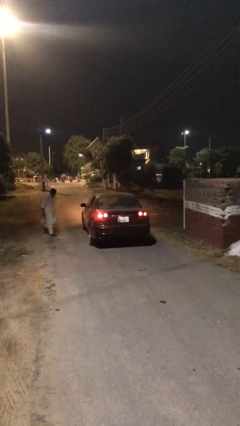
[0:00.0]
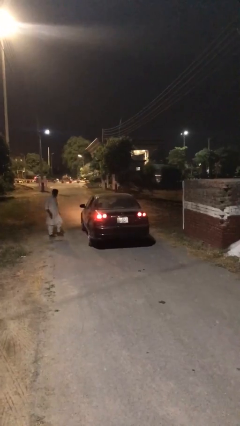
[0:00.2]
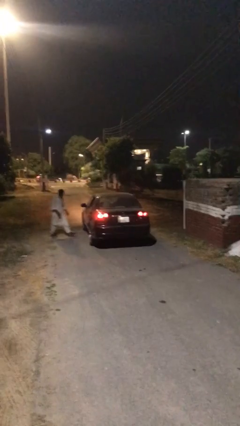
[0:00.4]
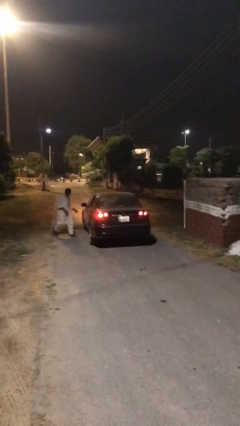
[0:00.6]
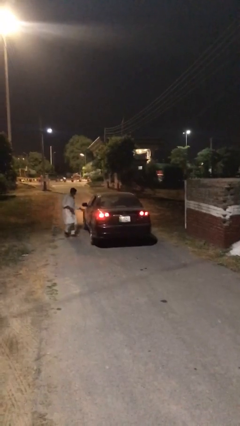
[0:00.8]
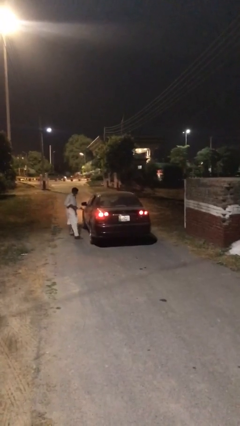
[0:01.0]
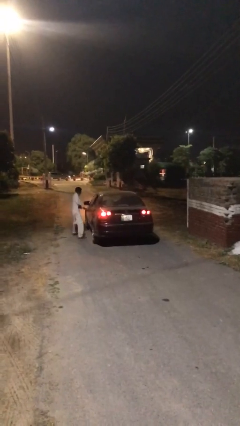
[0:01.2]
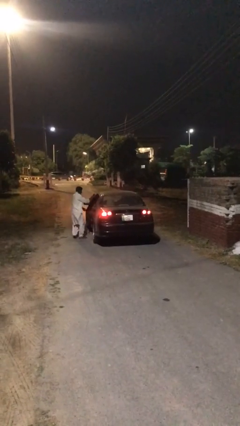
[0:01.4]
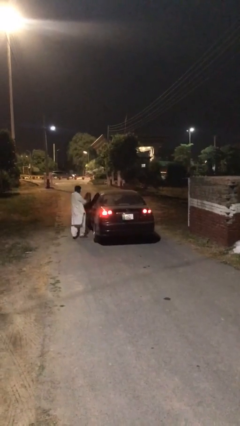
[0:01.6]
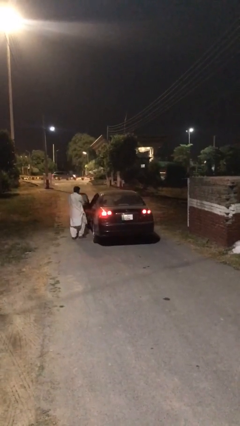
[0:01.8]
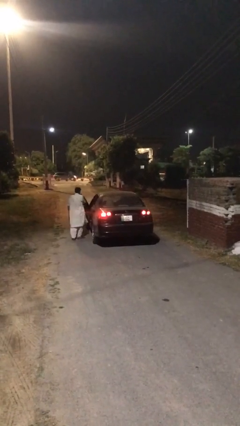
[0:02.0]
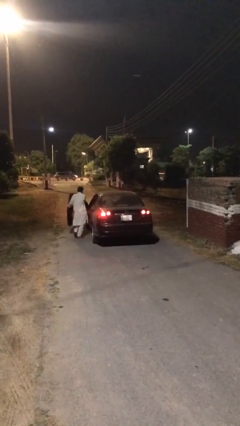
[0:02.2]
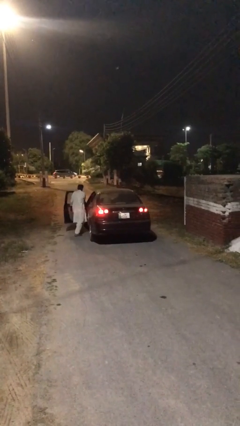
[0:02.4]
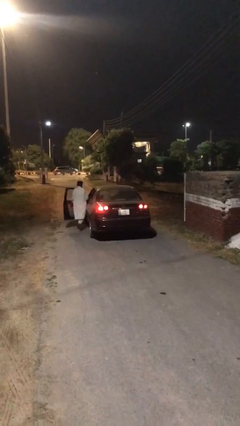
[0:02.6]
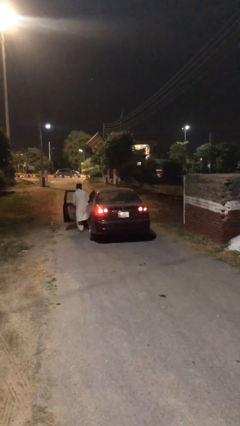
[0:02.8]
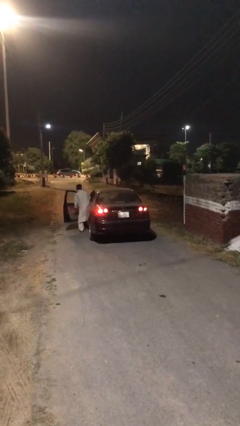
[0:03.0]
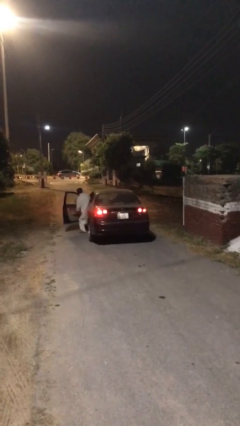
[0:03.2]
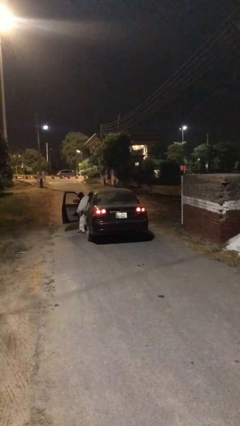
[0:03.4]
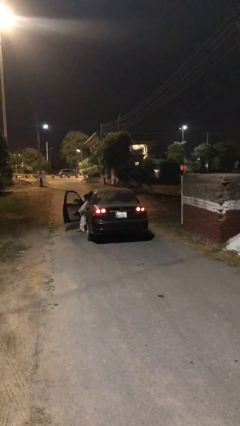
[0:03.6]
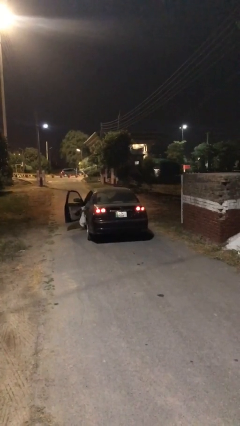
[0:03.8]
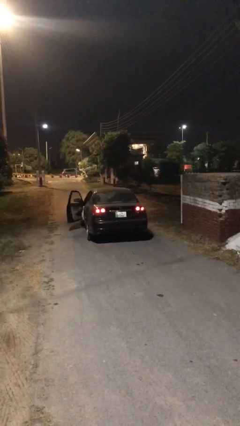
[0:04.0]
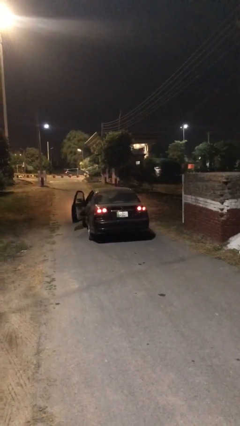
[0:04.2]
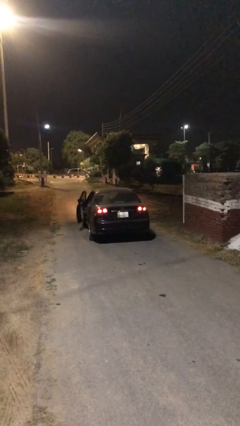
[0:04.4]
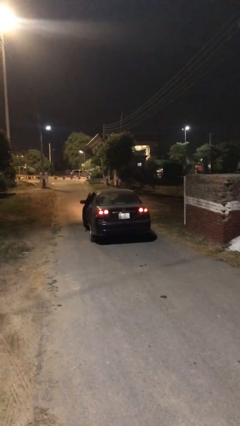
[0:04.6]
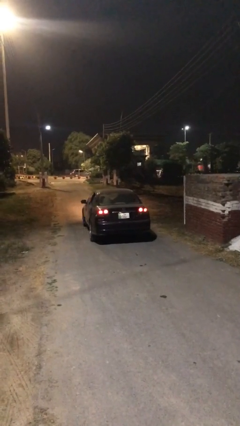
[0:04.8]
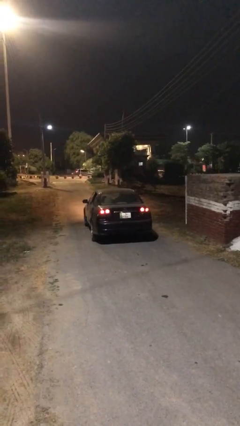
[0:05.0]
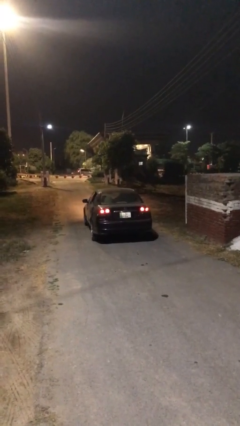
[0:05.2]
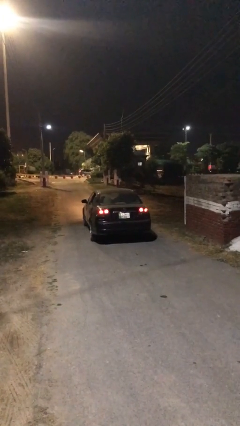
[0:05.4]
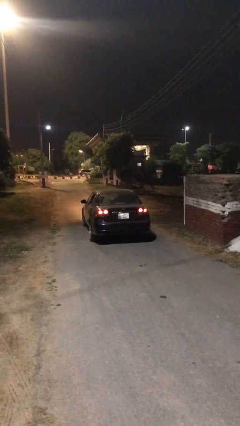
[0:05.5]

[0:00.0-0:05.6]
car picks up person

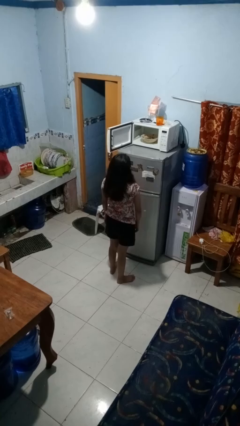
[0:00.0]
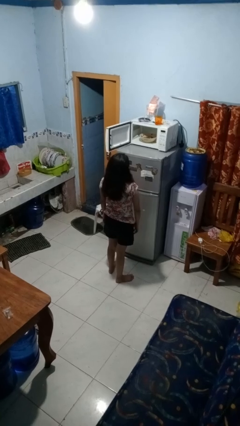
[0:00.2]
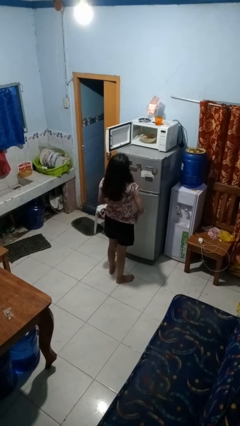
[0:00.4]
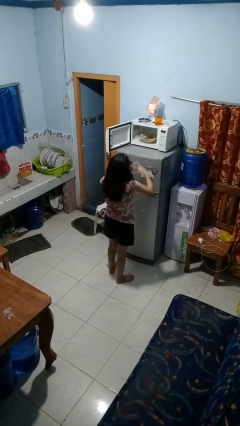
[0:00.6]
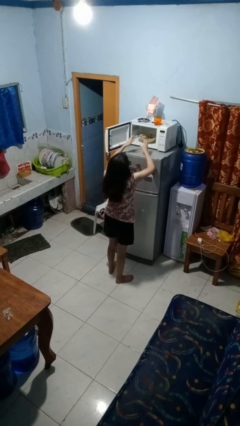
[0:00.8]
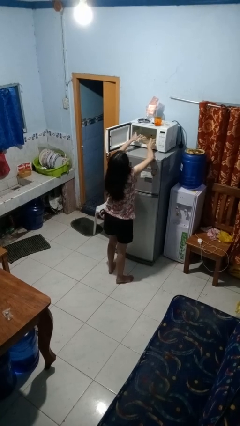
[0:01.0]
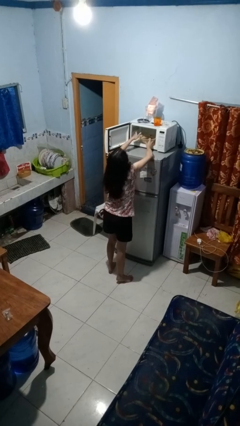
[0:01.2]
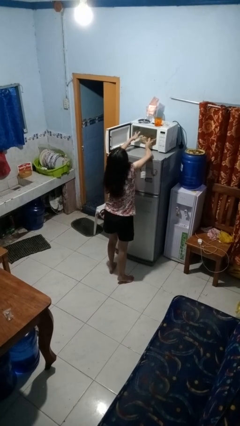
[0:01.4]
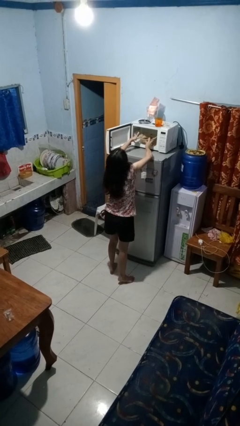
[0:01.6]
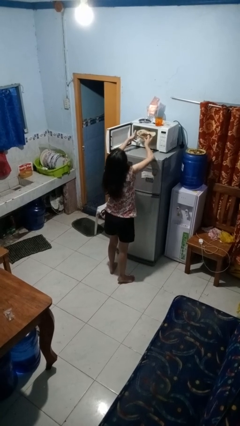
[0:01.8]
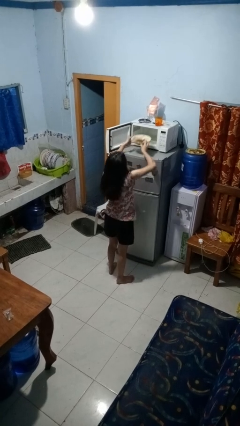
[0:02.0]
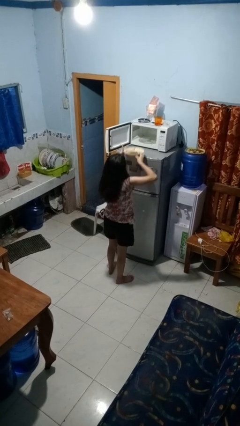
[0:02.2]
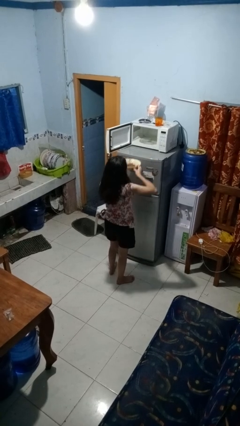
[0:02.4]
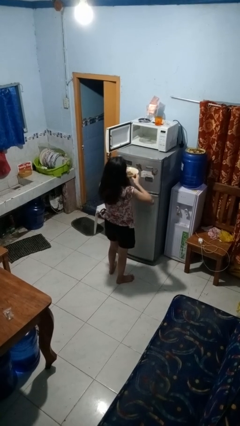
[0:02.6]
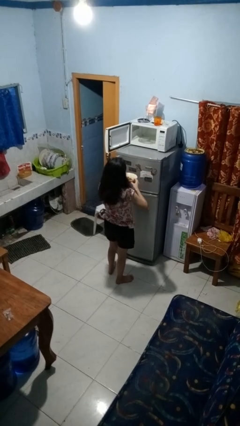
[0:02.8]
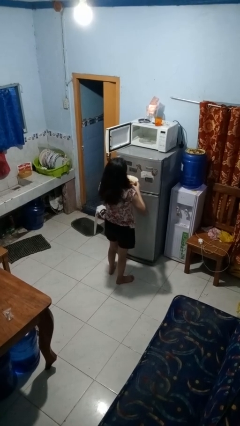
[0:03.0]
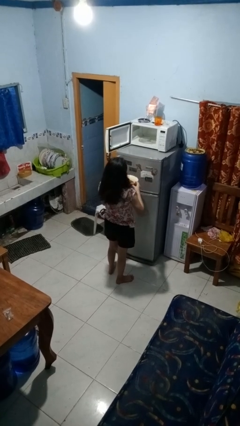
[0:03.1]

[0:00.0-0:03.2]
person takes object from microwave

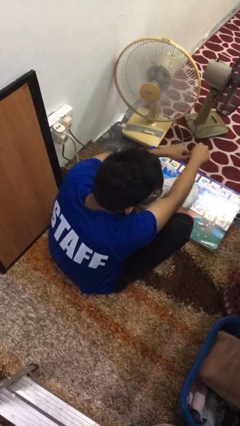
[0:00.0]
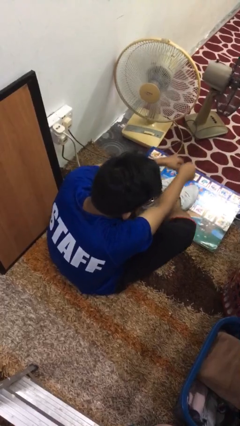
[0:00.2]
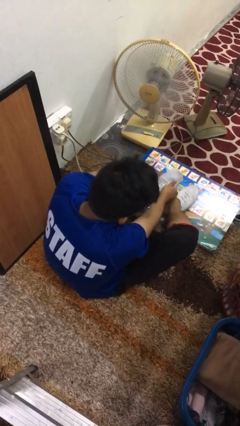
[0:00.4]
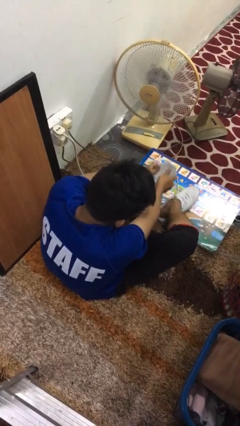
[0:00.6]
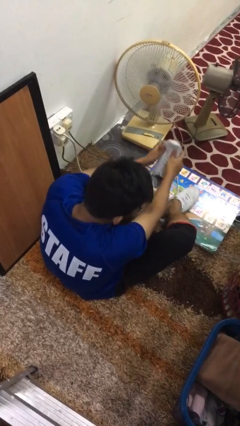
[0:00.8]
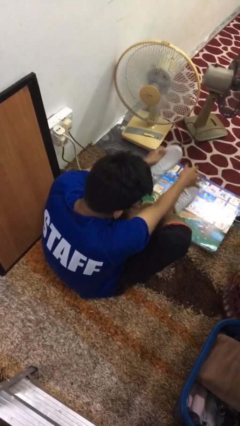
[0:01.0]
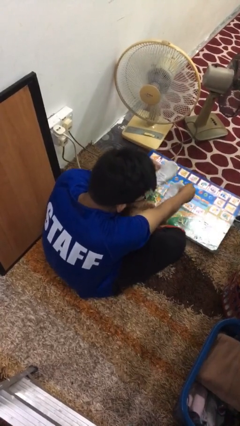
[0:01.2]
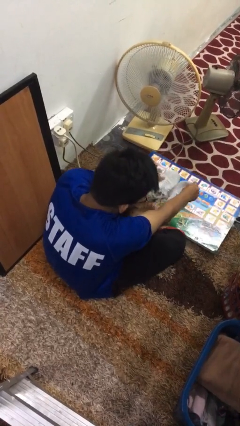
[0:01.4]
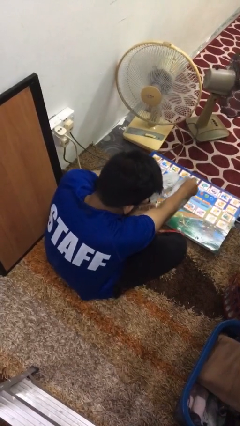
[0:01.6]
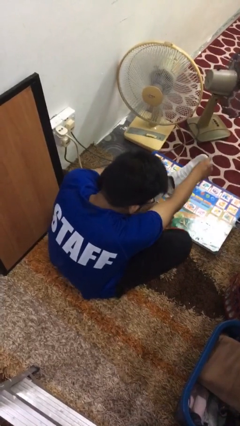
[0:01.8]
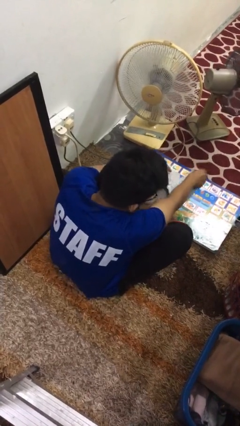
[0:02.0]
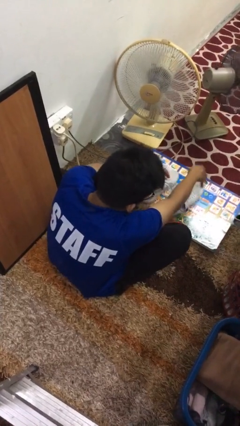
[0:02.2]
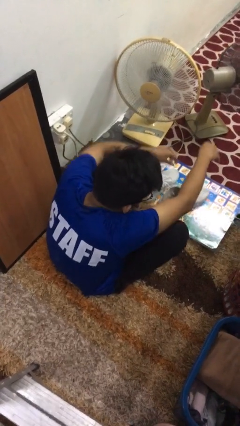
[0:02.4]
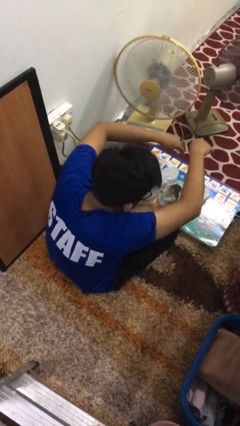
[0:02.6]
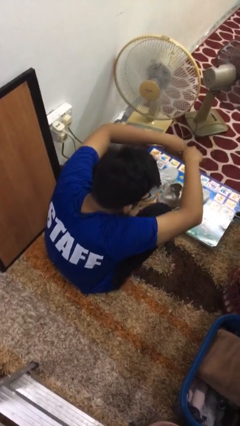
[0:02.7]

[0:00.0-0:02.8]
person takes off shoes

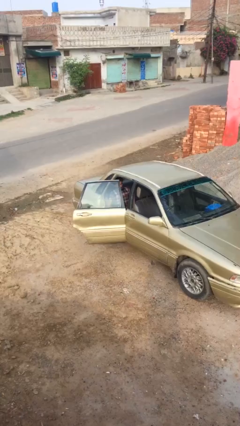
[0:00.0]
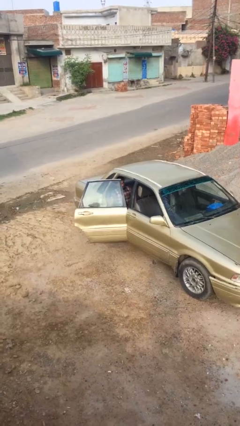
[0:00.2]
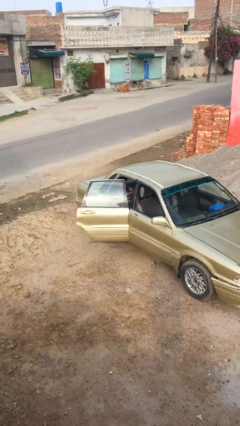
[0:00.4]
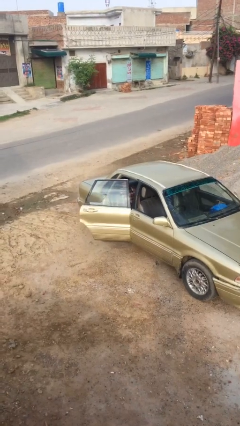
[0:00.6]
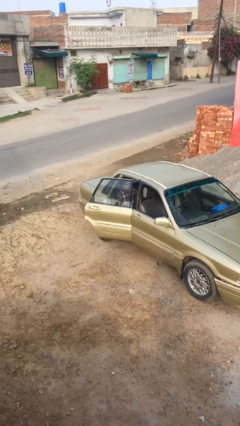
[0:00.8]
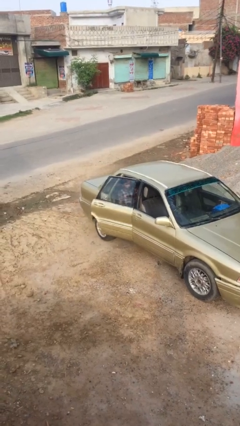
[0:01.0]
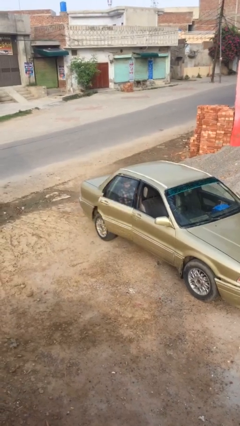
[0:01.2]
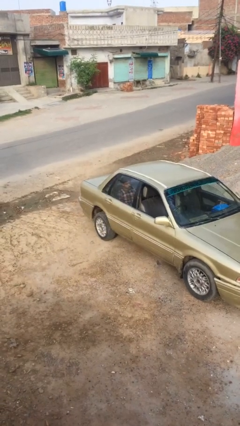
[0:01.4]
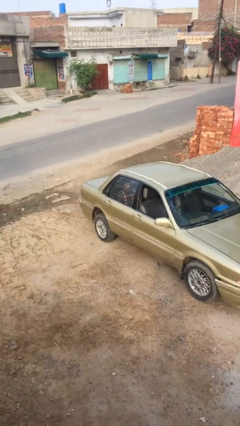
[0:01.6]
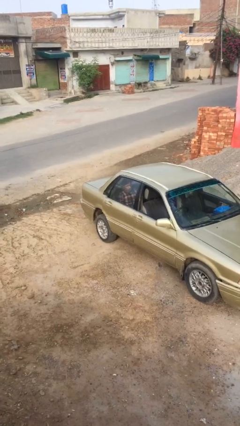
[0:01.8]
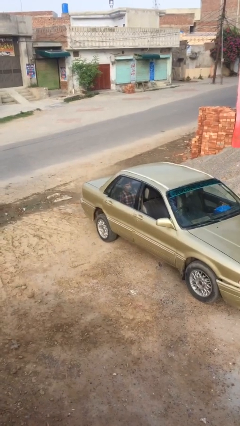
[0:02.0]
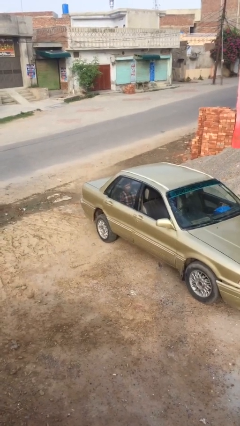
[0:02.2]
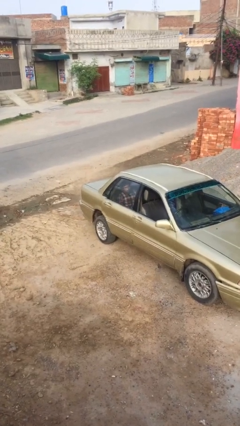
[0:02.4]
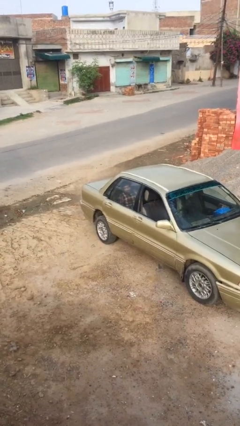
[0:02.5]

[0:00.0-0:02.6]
person closes car door

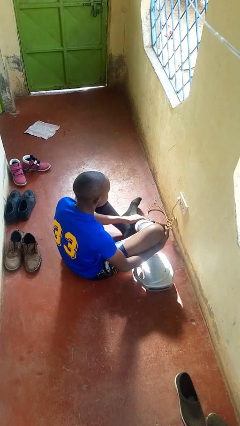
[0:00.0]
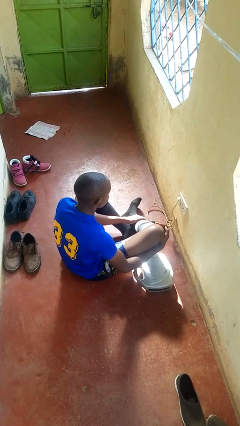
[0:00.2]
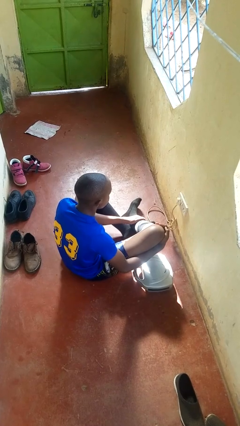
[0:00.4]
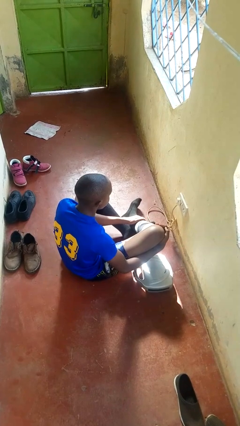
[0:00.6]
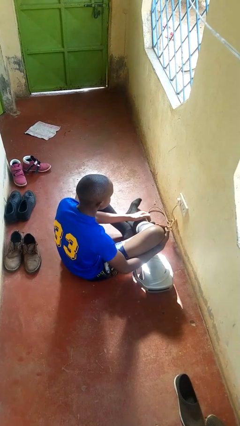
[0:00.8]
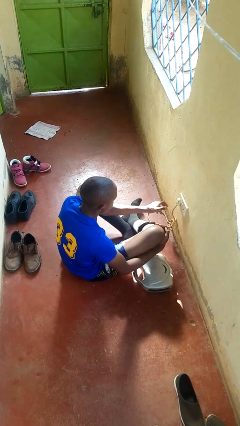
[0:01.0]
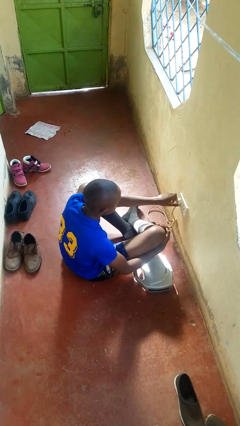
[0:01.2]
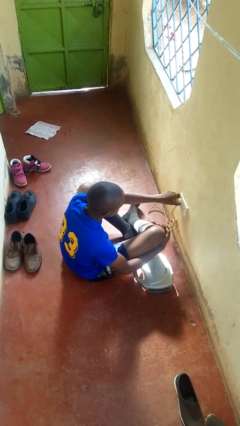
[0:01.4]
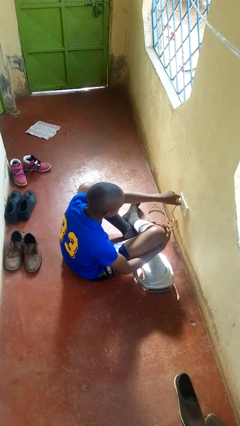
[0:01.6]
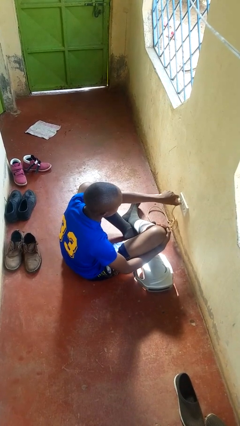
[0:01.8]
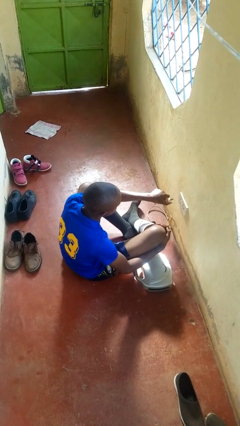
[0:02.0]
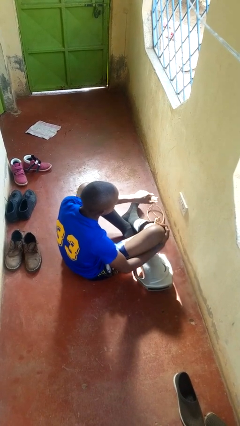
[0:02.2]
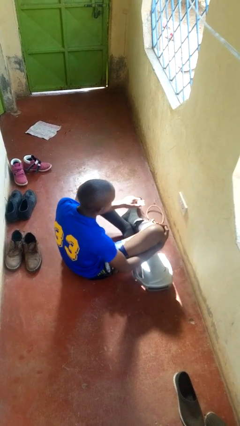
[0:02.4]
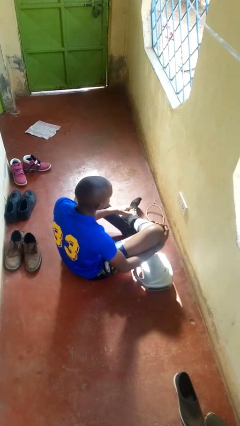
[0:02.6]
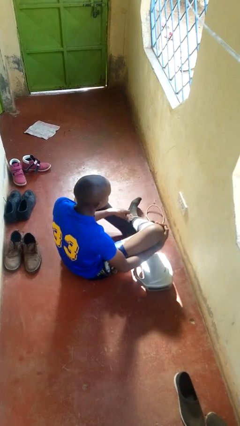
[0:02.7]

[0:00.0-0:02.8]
person unplugs from electrical socket

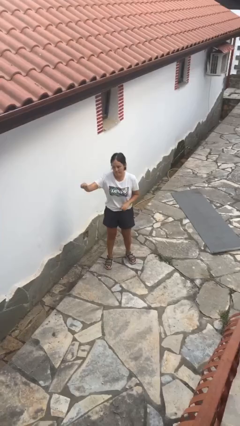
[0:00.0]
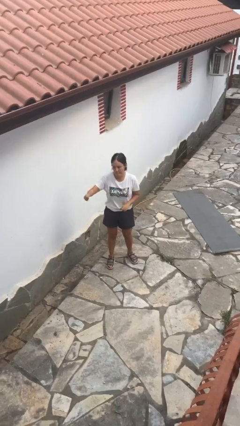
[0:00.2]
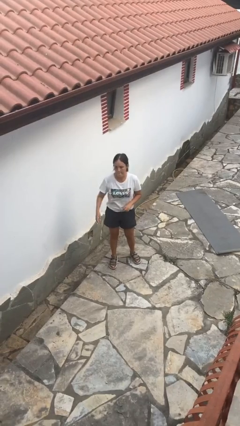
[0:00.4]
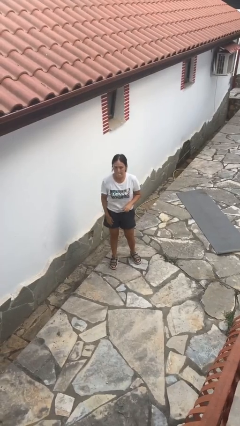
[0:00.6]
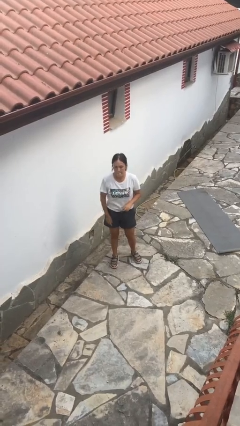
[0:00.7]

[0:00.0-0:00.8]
person gestures swipe right
